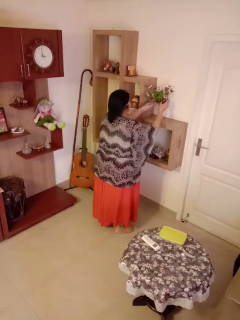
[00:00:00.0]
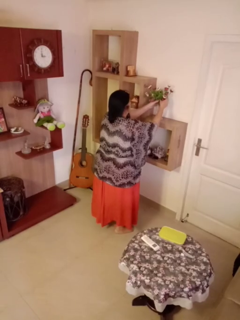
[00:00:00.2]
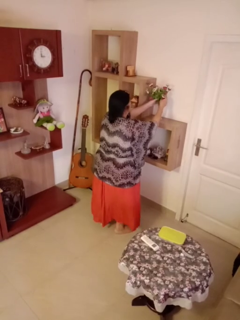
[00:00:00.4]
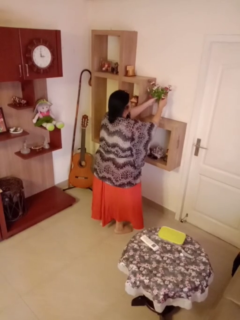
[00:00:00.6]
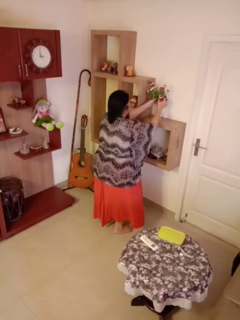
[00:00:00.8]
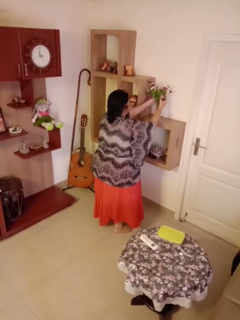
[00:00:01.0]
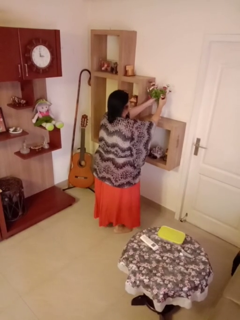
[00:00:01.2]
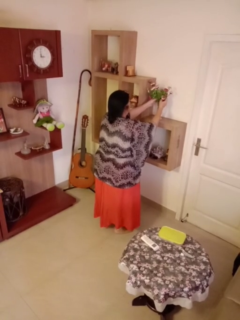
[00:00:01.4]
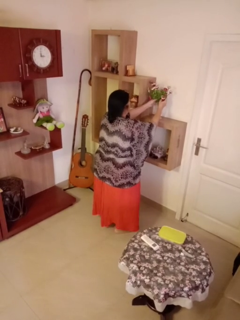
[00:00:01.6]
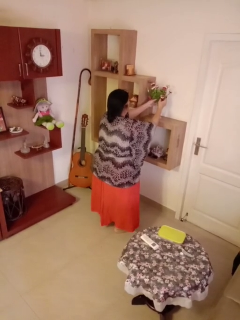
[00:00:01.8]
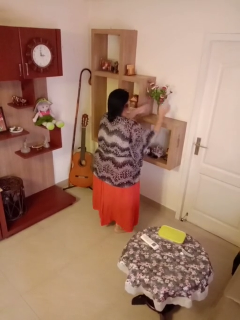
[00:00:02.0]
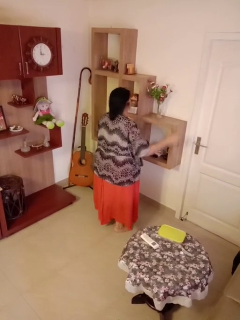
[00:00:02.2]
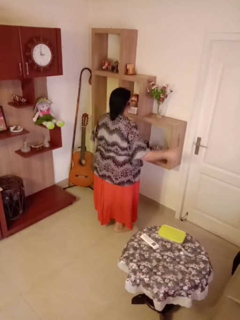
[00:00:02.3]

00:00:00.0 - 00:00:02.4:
person arranges flowers in vase

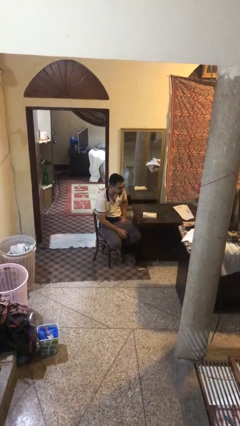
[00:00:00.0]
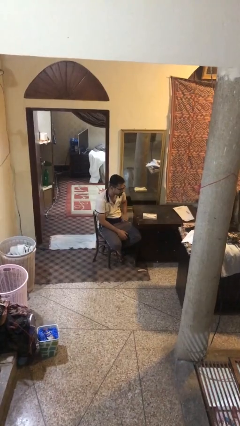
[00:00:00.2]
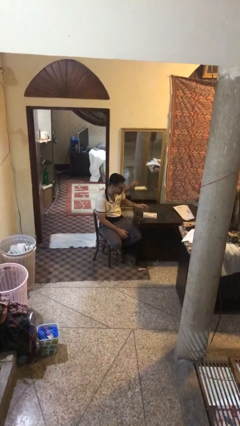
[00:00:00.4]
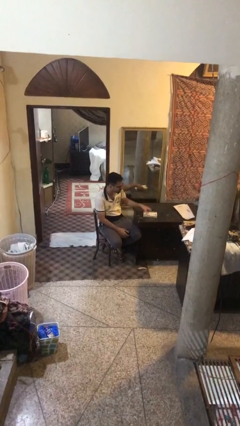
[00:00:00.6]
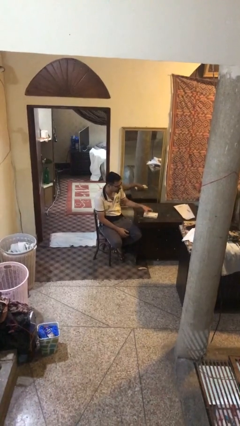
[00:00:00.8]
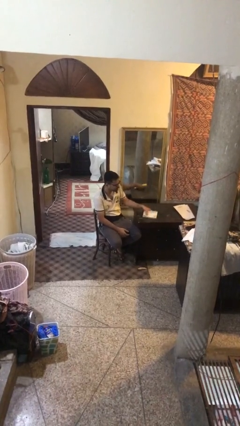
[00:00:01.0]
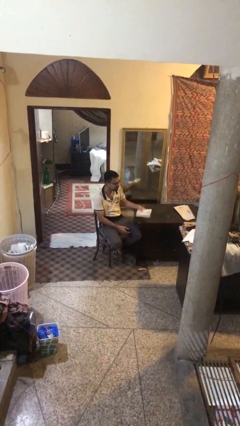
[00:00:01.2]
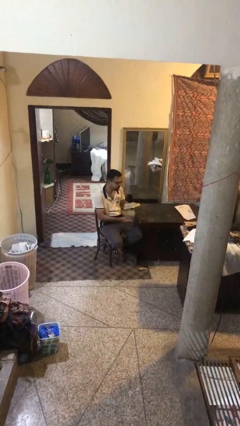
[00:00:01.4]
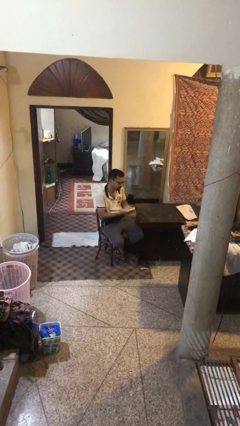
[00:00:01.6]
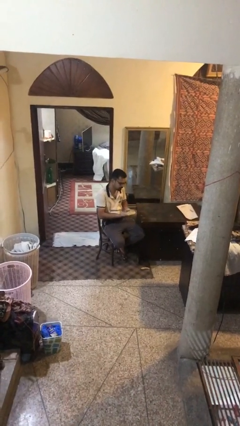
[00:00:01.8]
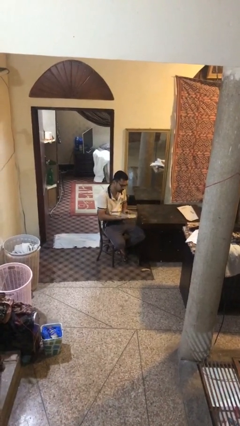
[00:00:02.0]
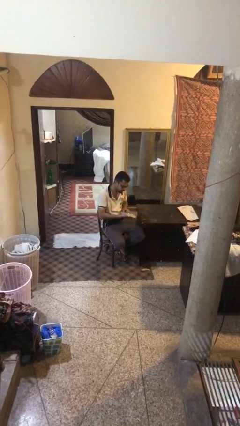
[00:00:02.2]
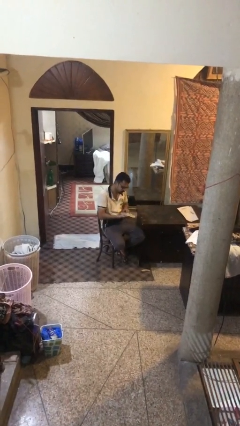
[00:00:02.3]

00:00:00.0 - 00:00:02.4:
person picks up object from table

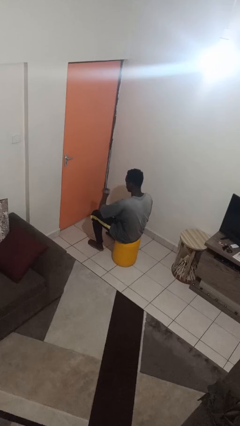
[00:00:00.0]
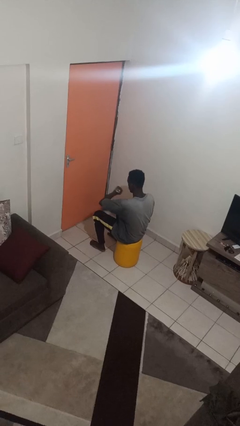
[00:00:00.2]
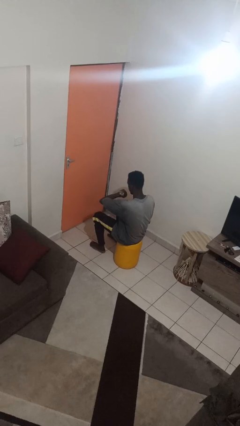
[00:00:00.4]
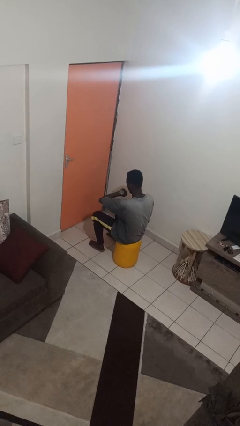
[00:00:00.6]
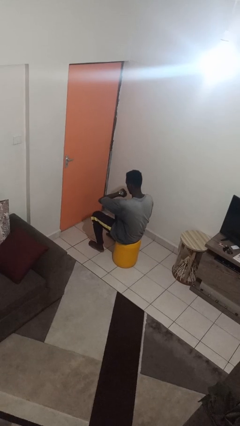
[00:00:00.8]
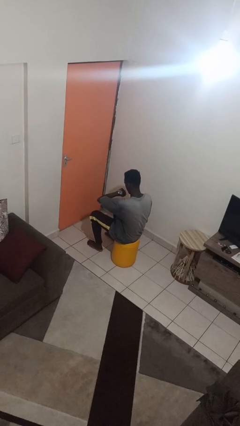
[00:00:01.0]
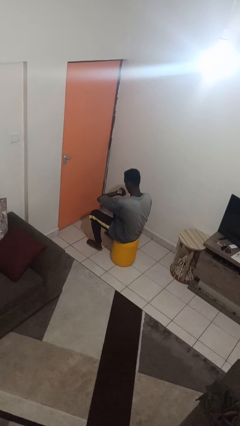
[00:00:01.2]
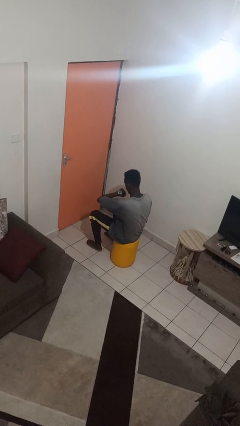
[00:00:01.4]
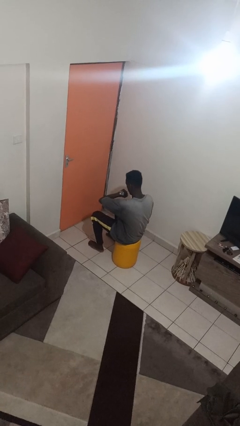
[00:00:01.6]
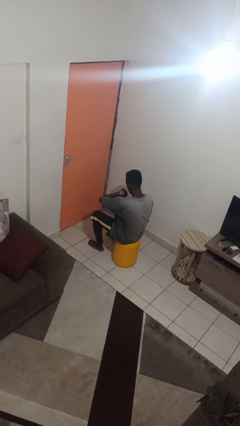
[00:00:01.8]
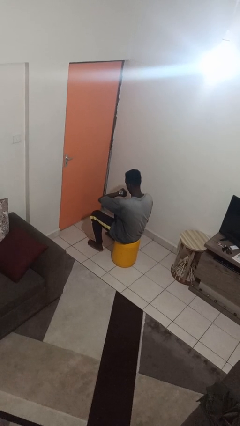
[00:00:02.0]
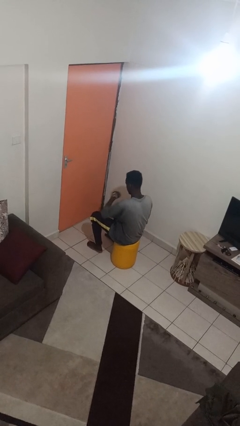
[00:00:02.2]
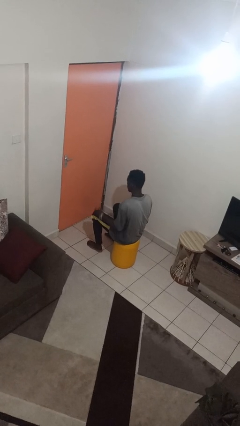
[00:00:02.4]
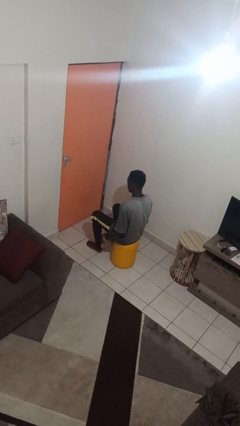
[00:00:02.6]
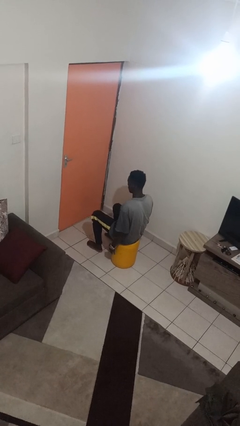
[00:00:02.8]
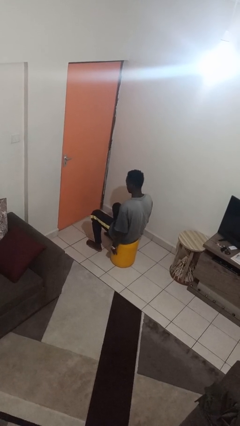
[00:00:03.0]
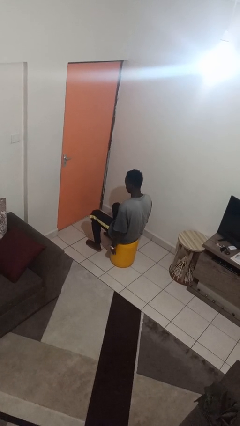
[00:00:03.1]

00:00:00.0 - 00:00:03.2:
person looks at wristwatch

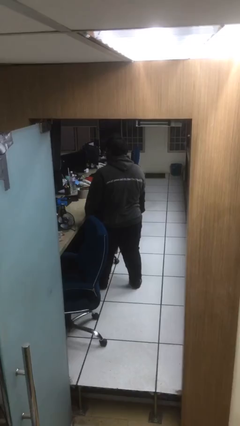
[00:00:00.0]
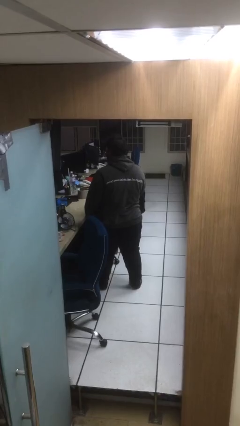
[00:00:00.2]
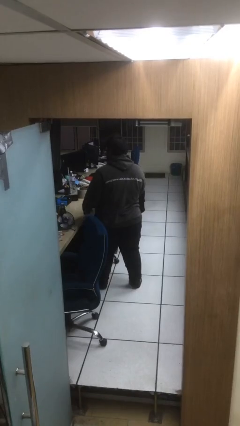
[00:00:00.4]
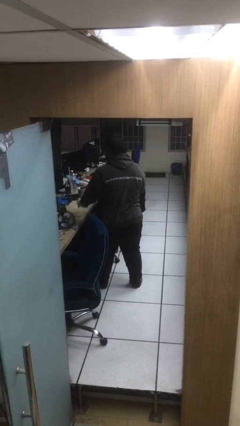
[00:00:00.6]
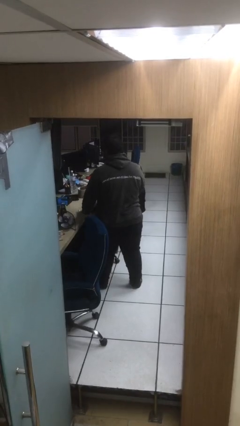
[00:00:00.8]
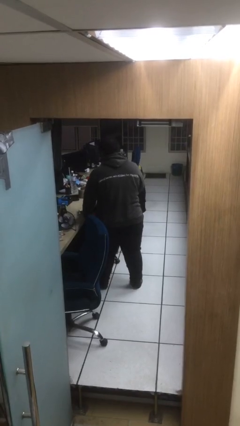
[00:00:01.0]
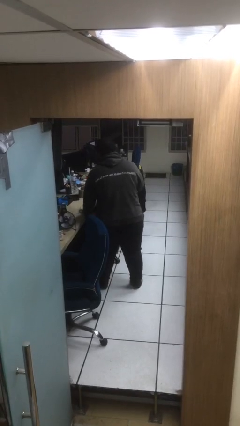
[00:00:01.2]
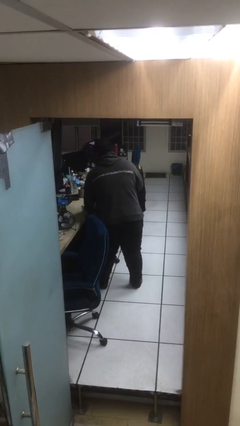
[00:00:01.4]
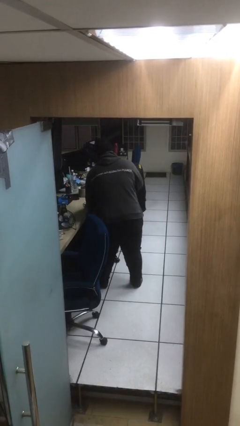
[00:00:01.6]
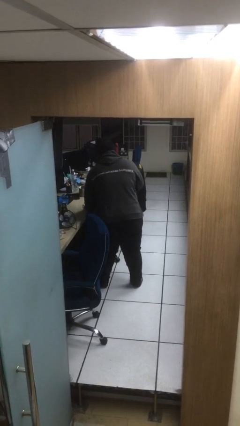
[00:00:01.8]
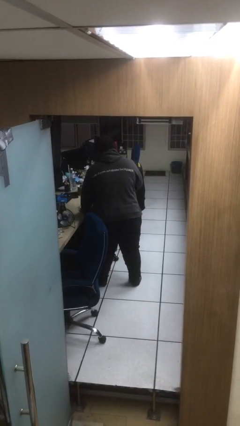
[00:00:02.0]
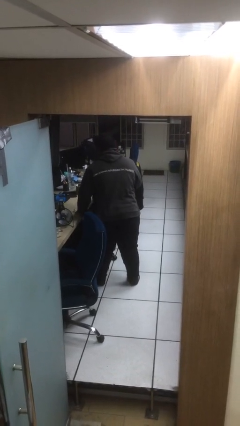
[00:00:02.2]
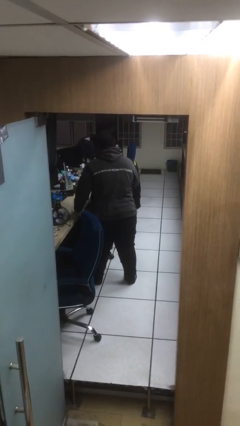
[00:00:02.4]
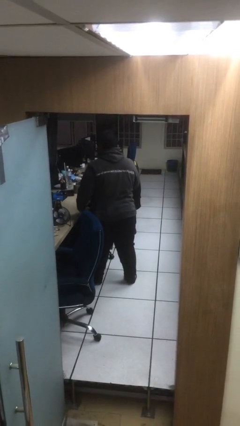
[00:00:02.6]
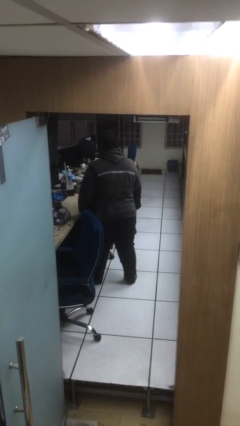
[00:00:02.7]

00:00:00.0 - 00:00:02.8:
person cleans table with rag

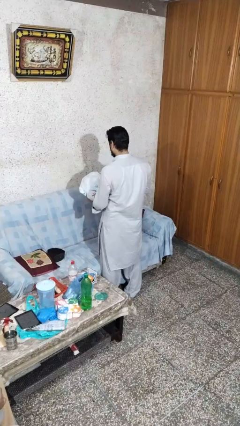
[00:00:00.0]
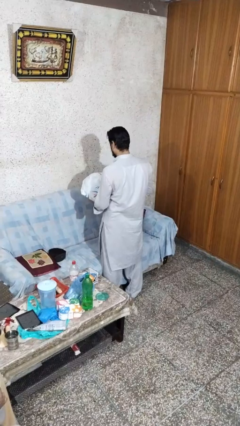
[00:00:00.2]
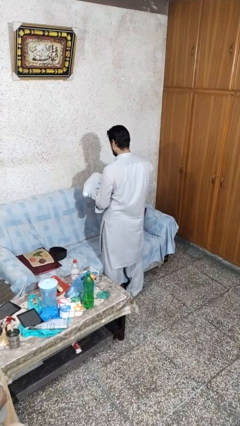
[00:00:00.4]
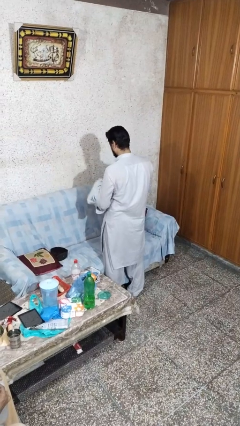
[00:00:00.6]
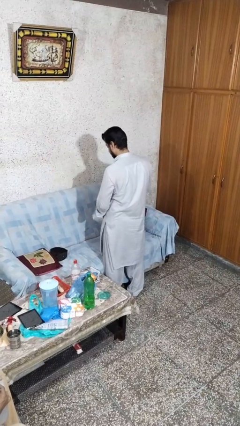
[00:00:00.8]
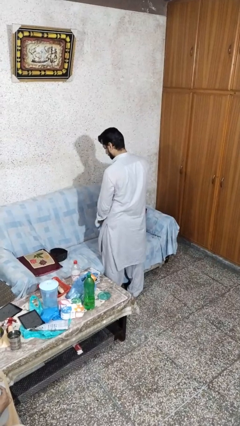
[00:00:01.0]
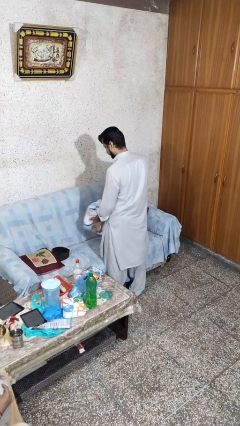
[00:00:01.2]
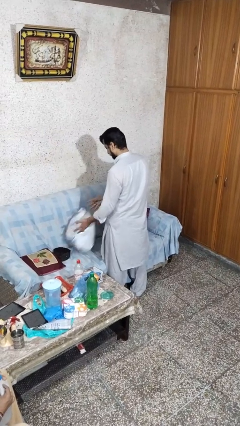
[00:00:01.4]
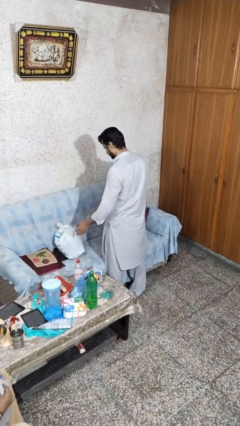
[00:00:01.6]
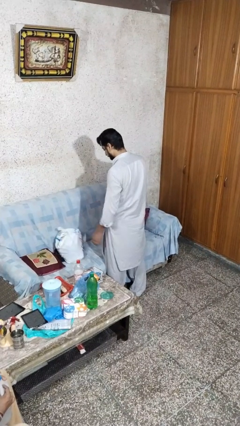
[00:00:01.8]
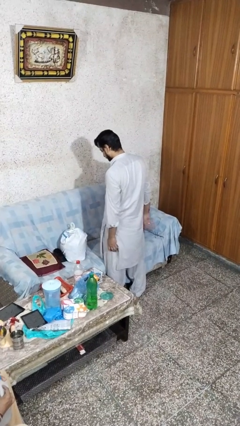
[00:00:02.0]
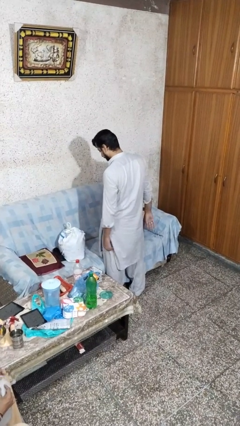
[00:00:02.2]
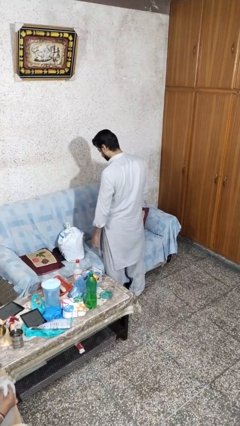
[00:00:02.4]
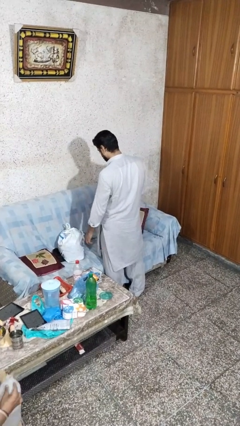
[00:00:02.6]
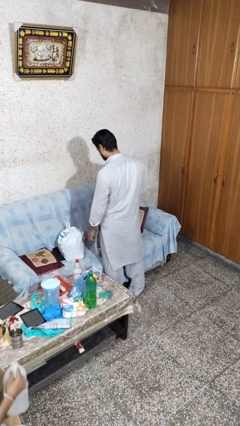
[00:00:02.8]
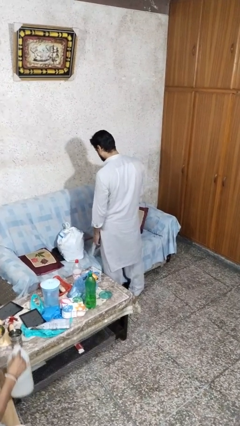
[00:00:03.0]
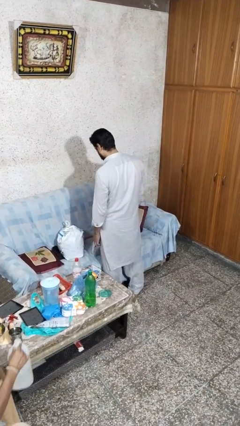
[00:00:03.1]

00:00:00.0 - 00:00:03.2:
person puts down object on couch

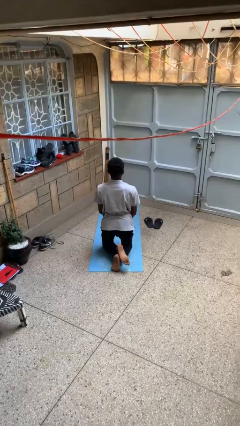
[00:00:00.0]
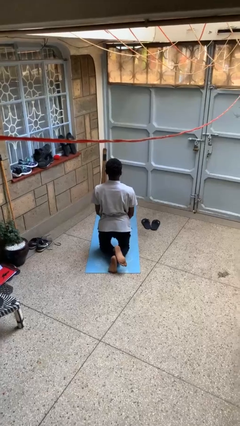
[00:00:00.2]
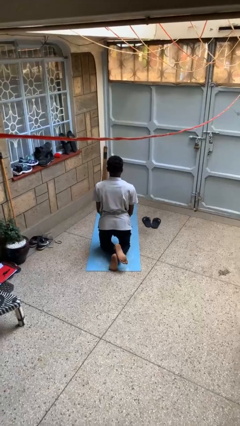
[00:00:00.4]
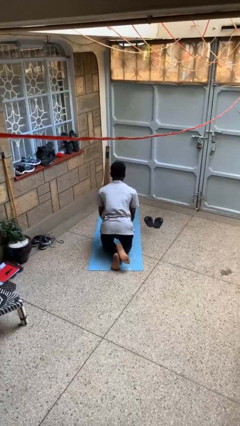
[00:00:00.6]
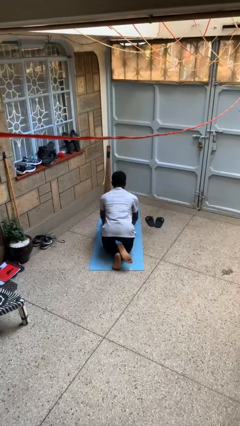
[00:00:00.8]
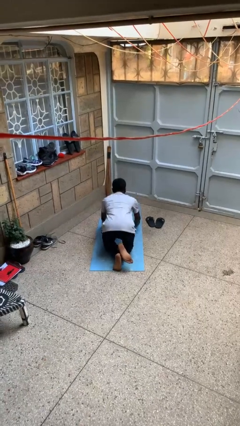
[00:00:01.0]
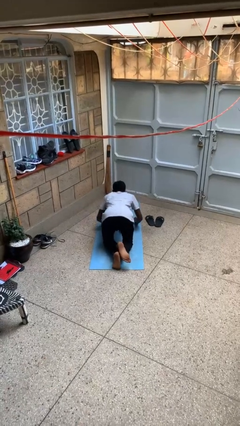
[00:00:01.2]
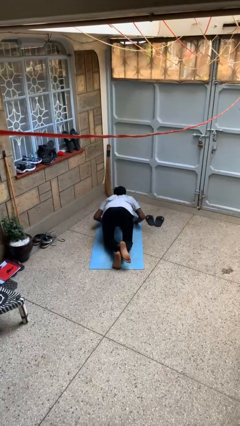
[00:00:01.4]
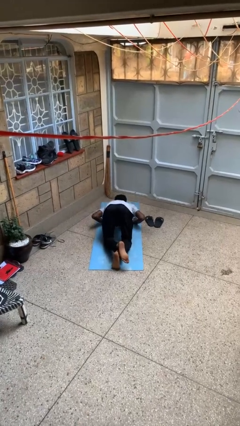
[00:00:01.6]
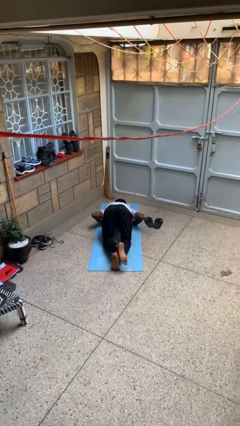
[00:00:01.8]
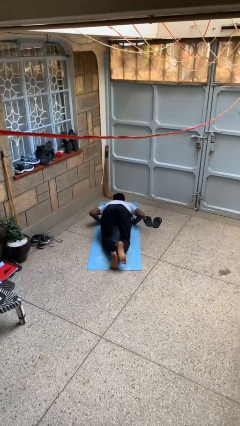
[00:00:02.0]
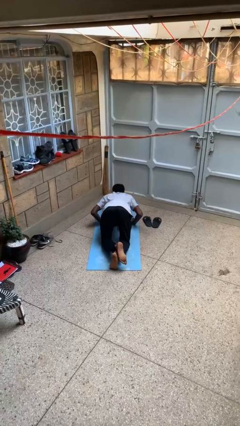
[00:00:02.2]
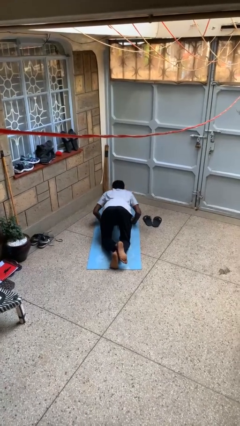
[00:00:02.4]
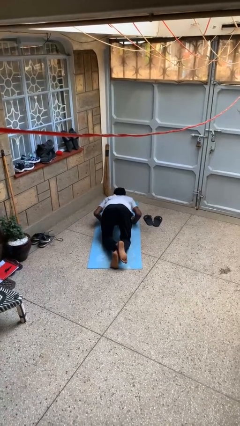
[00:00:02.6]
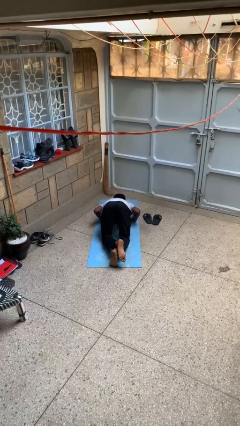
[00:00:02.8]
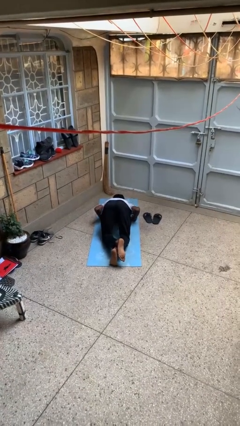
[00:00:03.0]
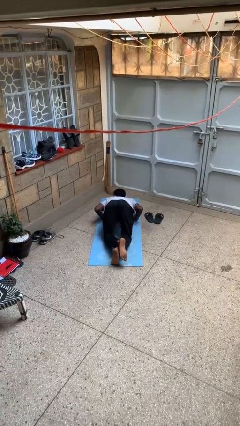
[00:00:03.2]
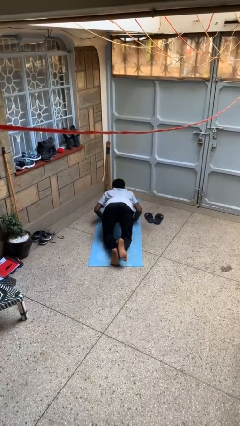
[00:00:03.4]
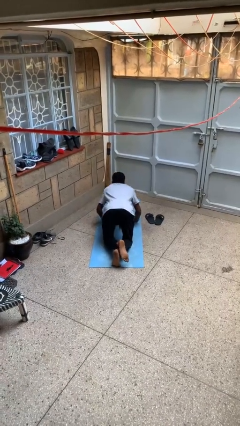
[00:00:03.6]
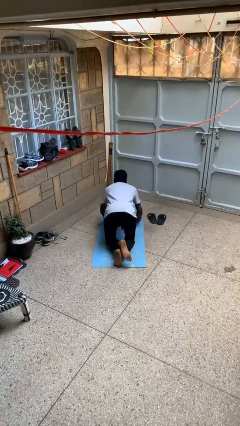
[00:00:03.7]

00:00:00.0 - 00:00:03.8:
person exercises with pushup
